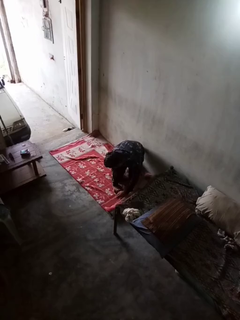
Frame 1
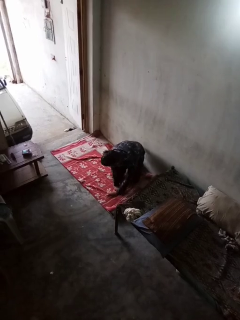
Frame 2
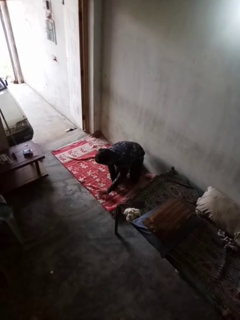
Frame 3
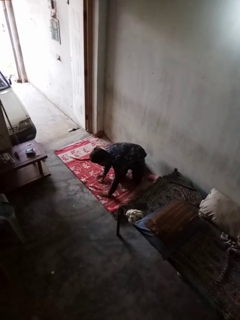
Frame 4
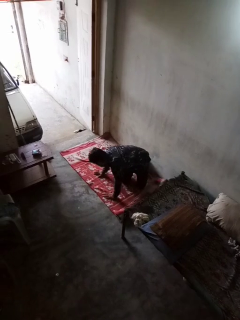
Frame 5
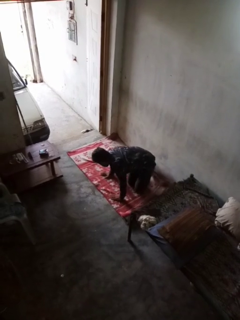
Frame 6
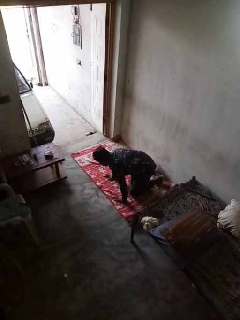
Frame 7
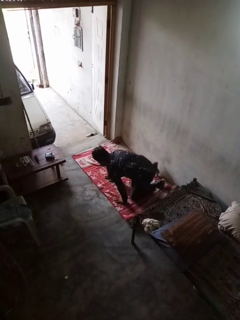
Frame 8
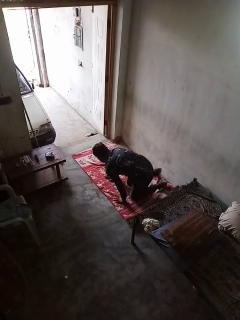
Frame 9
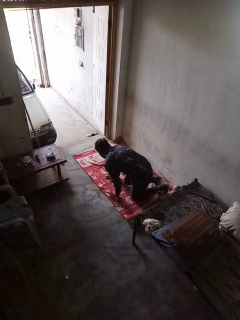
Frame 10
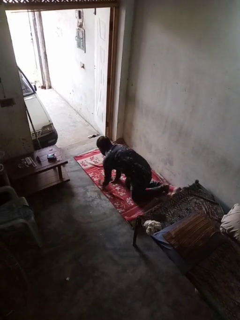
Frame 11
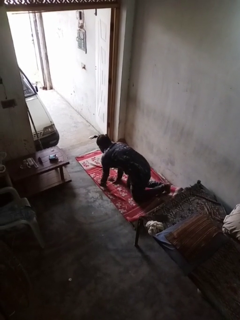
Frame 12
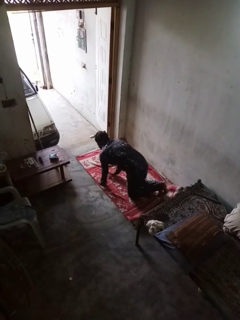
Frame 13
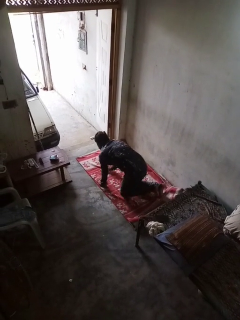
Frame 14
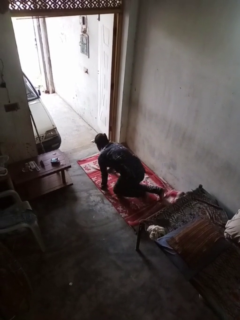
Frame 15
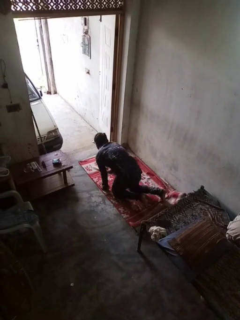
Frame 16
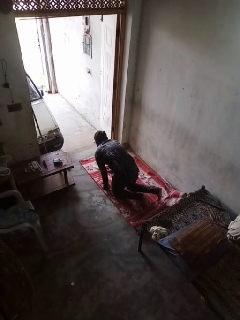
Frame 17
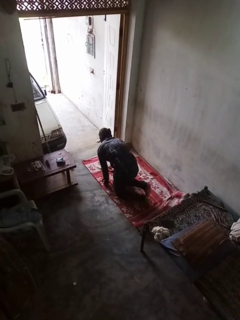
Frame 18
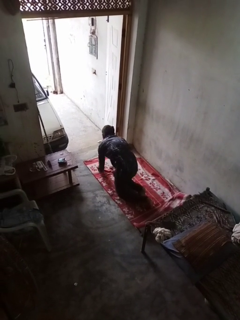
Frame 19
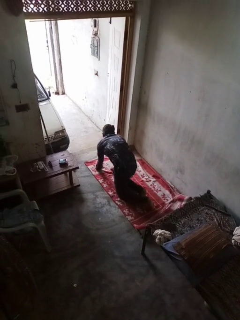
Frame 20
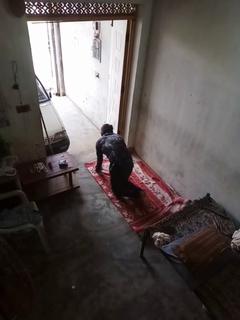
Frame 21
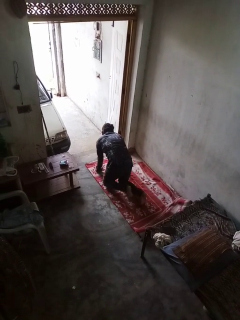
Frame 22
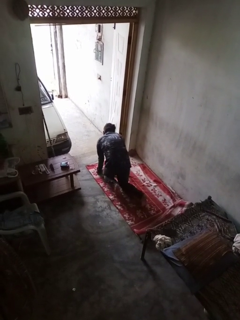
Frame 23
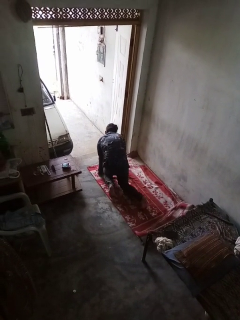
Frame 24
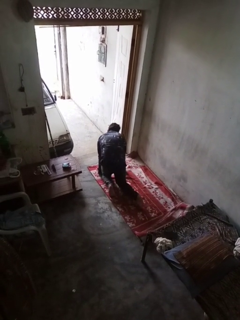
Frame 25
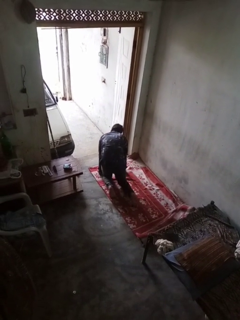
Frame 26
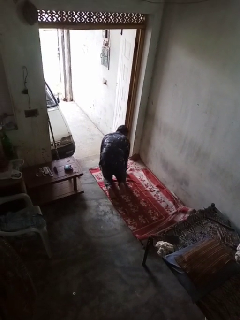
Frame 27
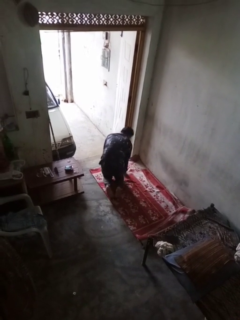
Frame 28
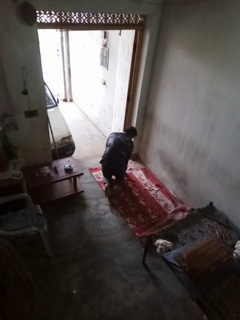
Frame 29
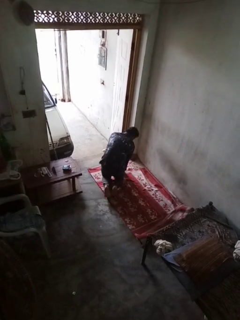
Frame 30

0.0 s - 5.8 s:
person crawls

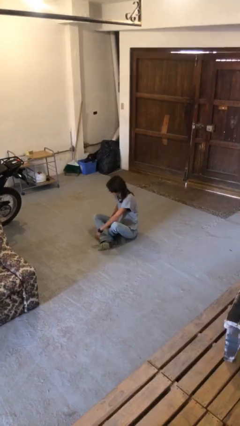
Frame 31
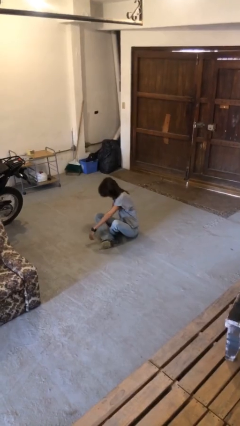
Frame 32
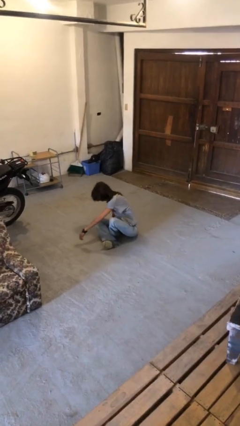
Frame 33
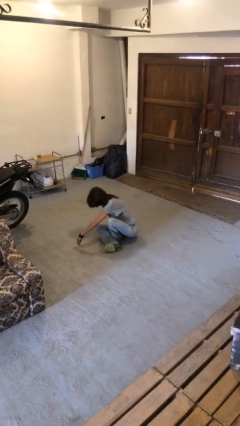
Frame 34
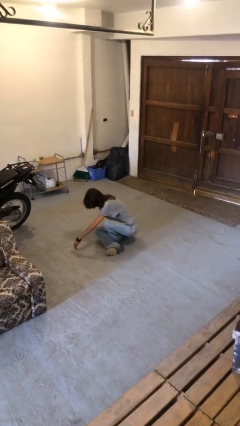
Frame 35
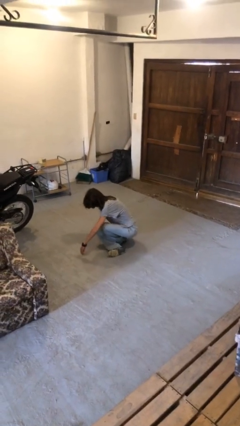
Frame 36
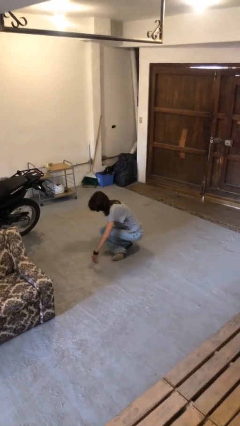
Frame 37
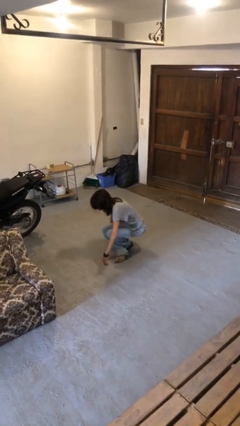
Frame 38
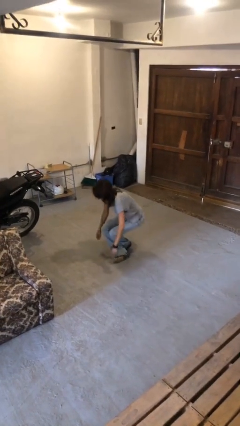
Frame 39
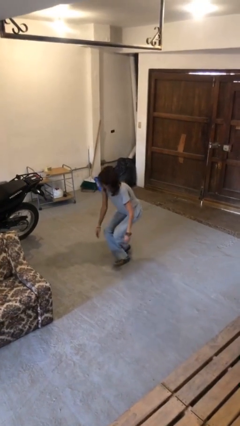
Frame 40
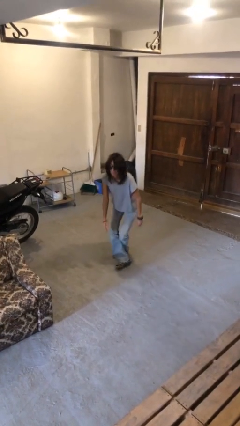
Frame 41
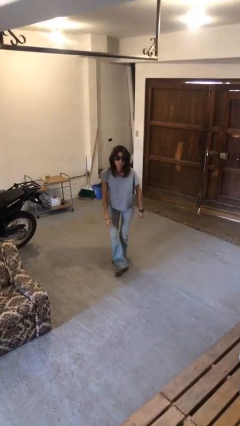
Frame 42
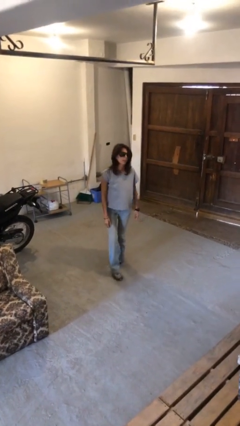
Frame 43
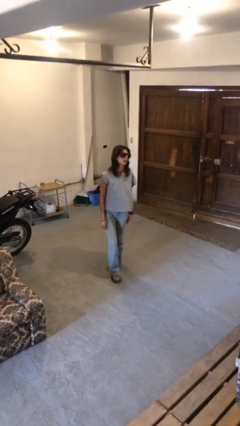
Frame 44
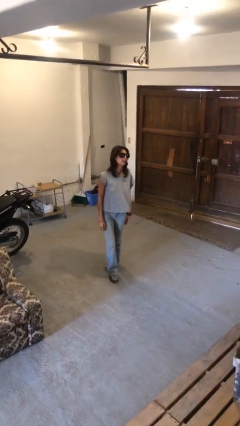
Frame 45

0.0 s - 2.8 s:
person stands up from floor

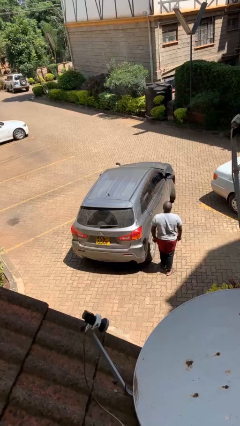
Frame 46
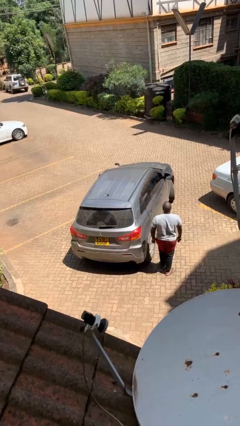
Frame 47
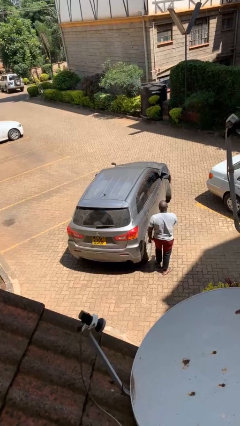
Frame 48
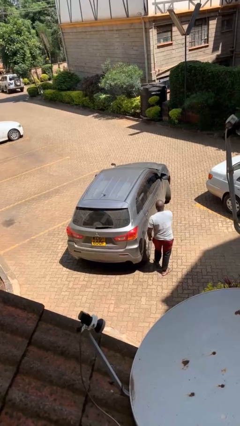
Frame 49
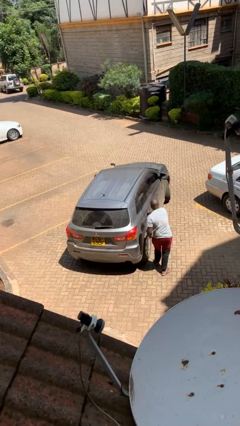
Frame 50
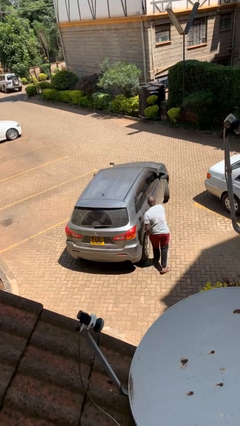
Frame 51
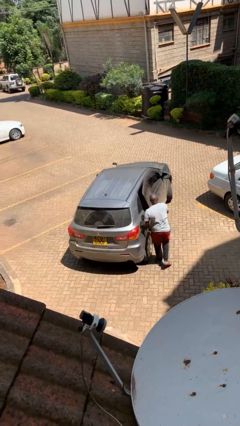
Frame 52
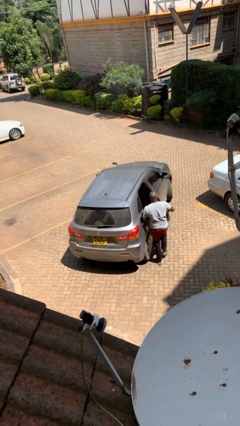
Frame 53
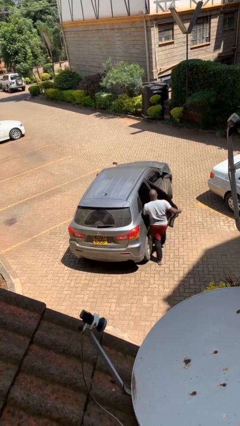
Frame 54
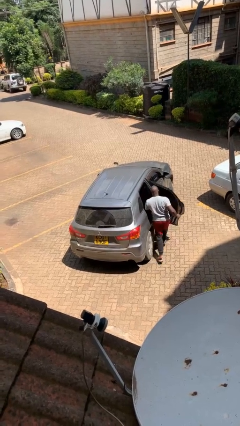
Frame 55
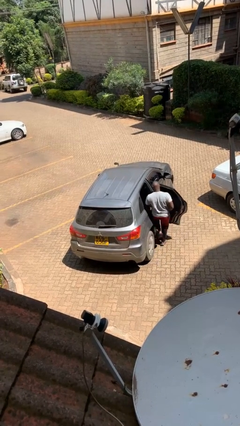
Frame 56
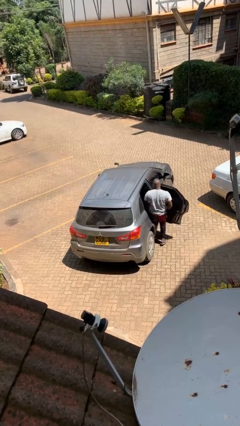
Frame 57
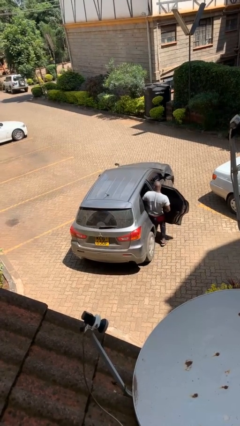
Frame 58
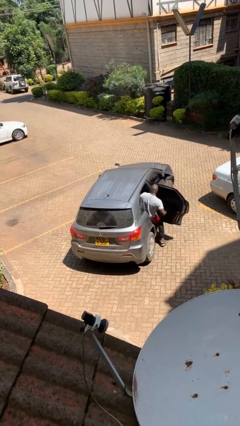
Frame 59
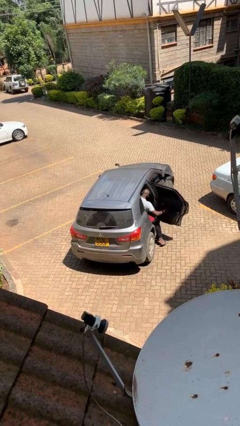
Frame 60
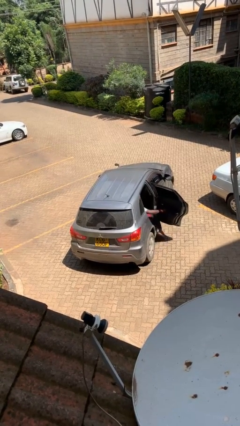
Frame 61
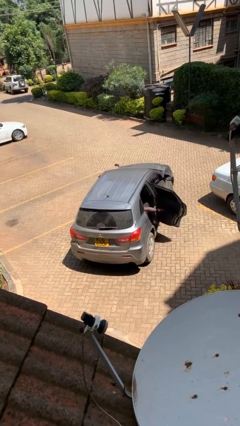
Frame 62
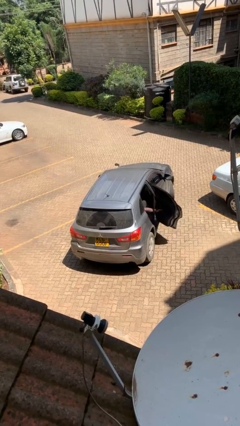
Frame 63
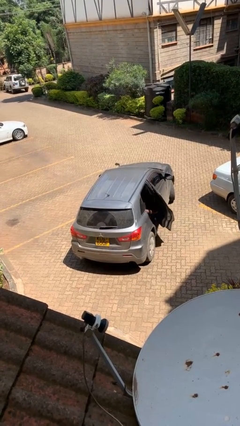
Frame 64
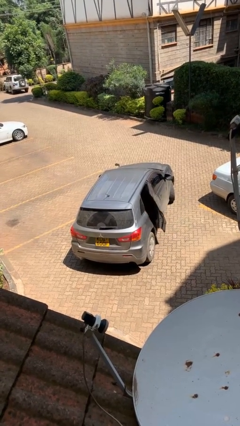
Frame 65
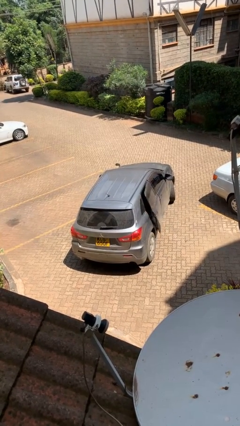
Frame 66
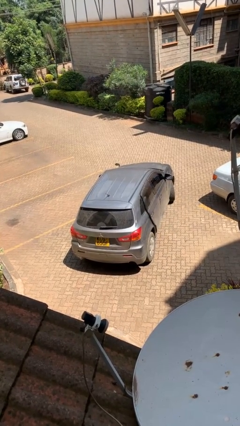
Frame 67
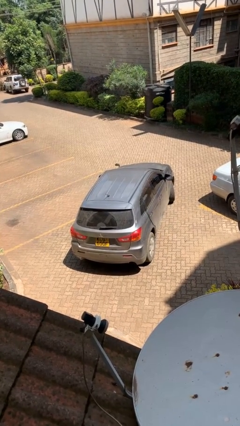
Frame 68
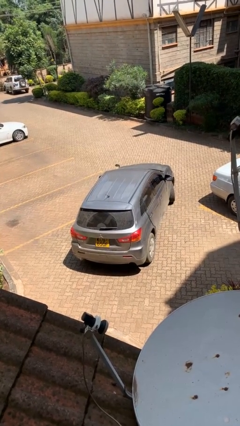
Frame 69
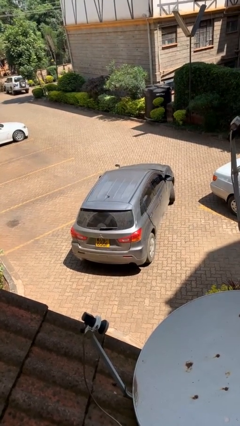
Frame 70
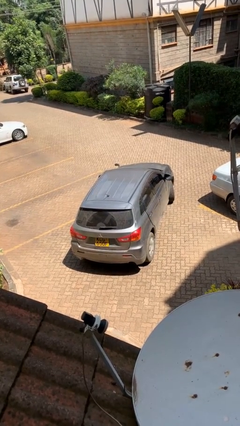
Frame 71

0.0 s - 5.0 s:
car picks up person

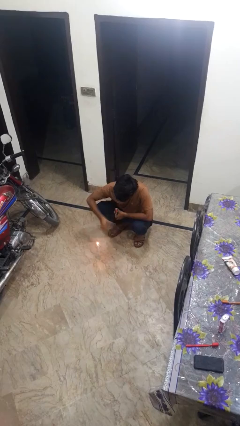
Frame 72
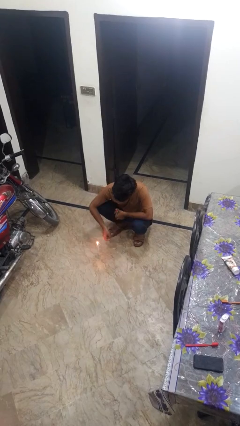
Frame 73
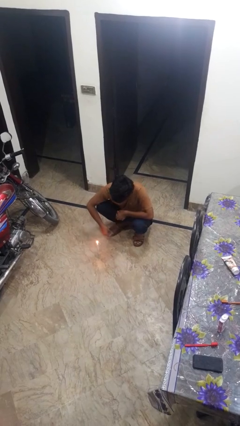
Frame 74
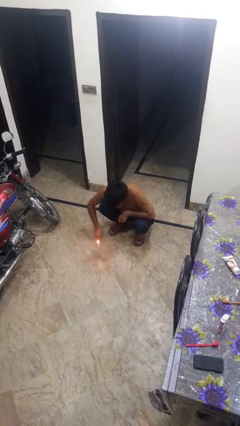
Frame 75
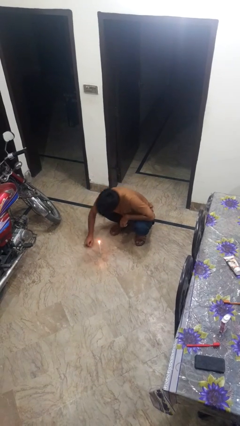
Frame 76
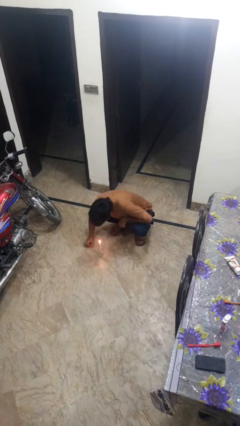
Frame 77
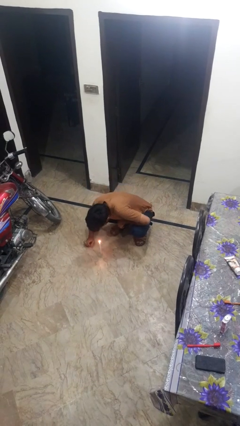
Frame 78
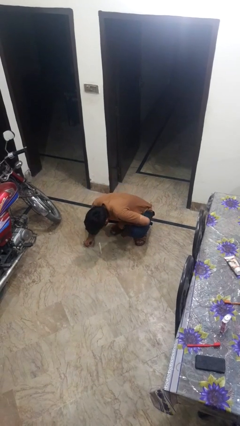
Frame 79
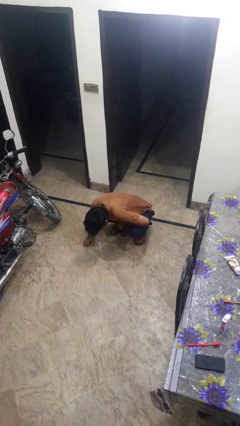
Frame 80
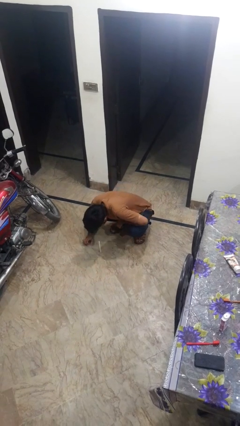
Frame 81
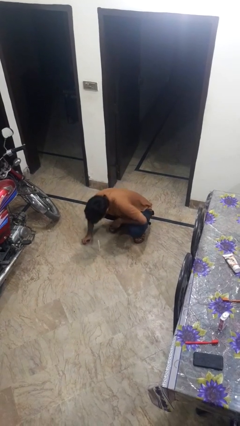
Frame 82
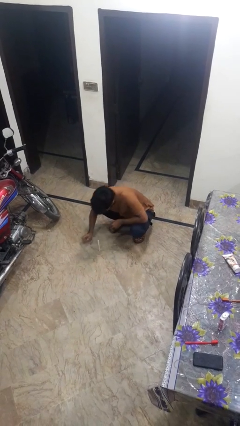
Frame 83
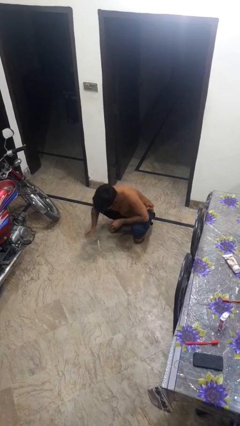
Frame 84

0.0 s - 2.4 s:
person extinguishes candle

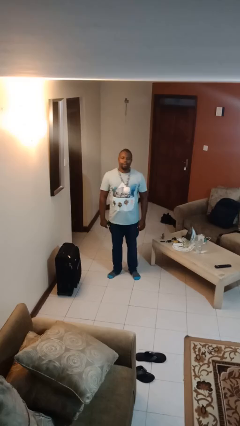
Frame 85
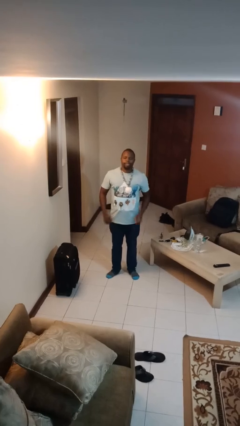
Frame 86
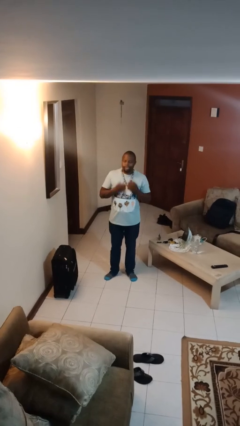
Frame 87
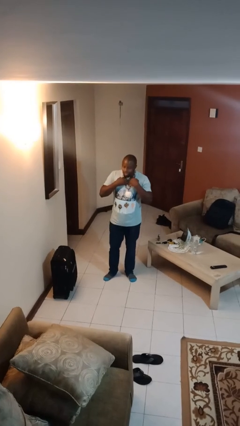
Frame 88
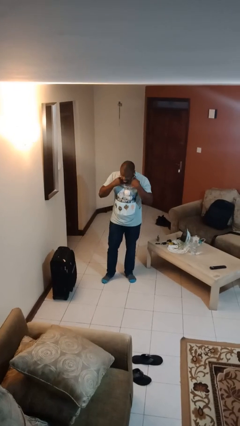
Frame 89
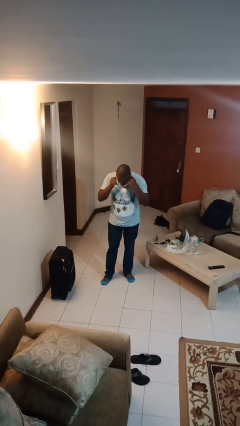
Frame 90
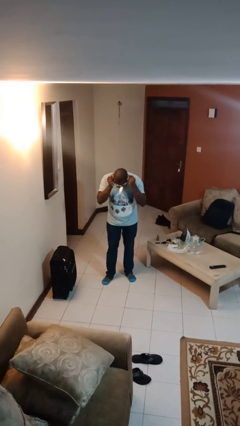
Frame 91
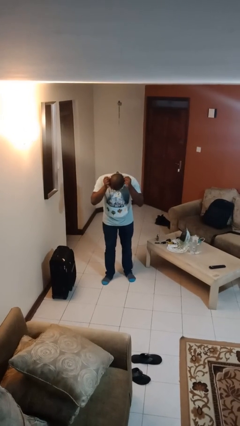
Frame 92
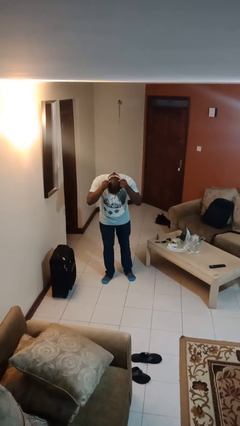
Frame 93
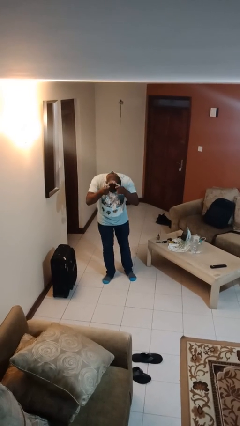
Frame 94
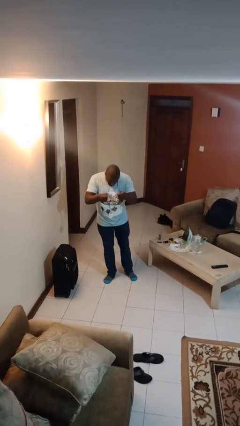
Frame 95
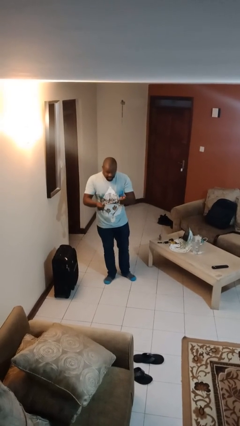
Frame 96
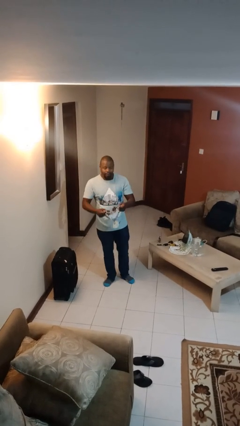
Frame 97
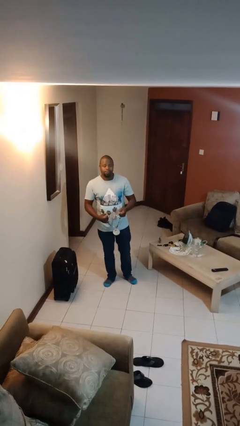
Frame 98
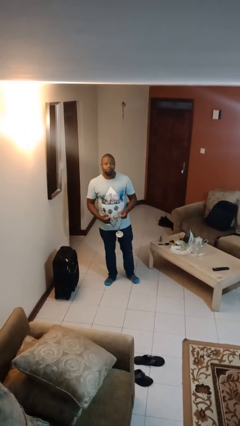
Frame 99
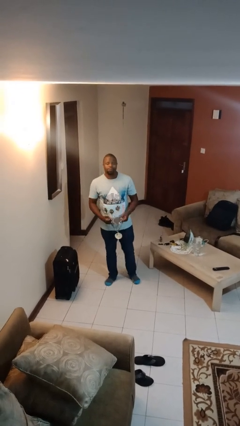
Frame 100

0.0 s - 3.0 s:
person takes off necklace

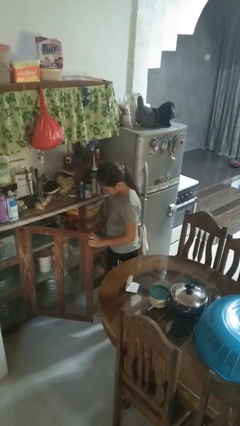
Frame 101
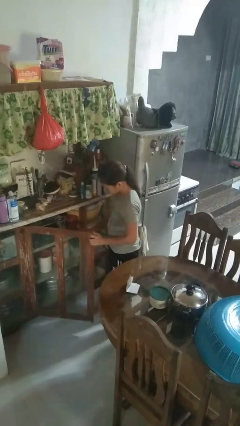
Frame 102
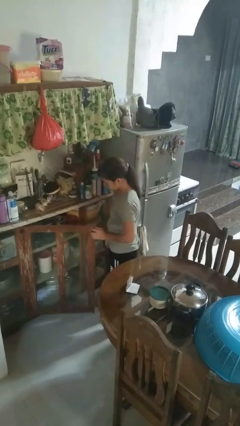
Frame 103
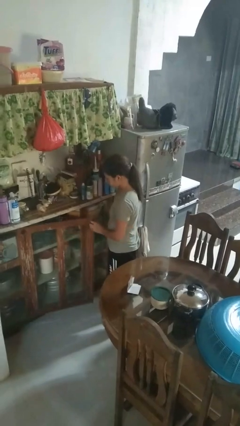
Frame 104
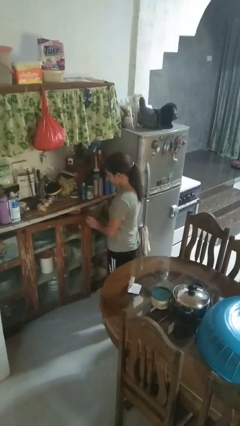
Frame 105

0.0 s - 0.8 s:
person closes cabinet
